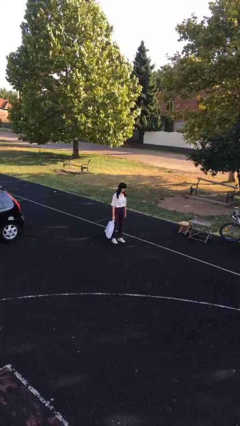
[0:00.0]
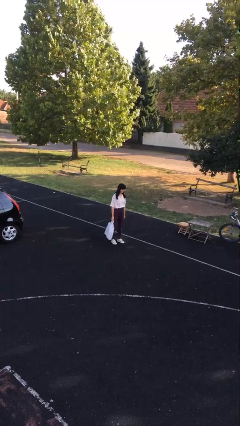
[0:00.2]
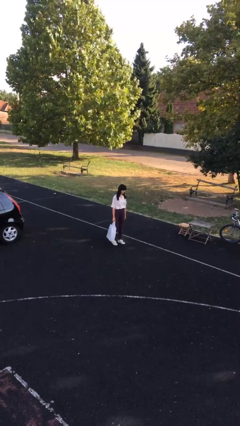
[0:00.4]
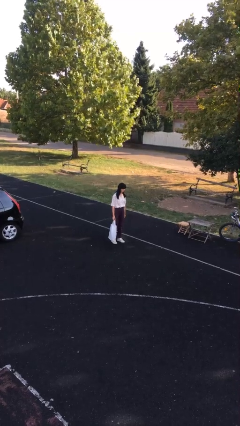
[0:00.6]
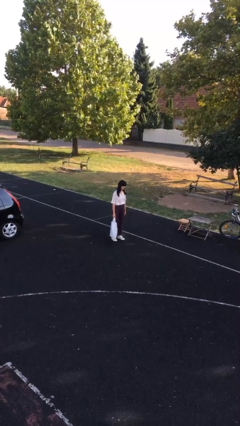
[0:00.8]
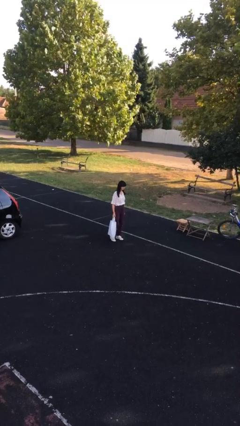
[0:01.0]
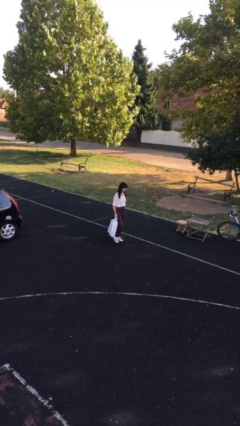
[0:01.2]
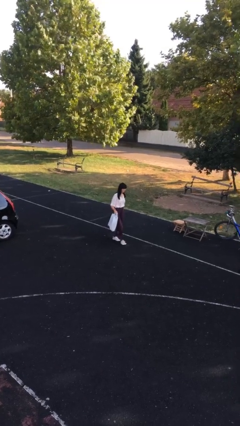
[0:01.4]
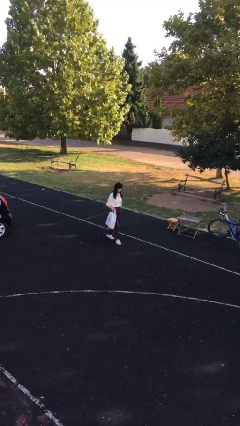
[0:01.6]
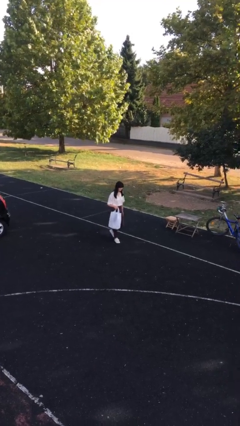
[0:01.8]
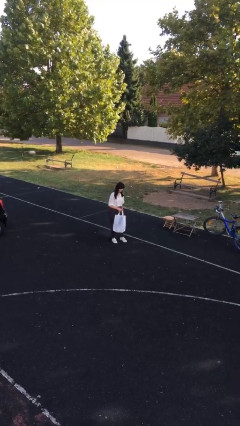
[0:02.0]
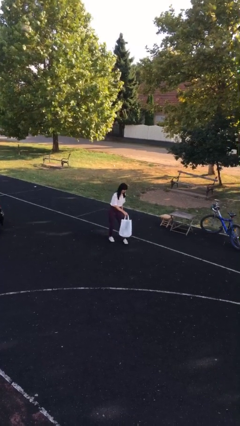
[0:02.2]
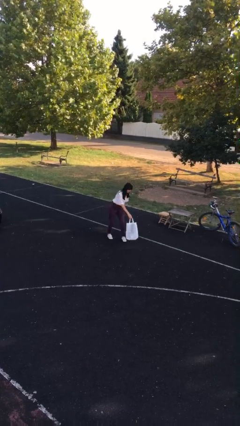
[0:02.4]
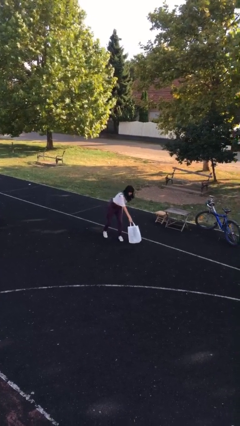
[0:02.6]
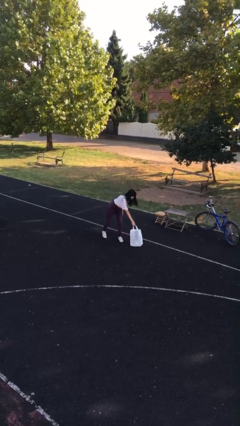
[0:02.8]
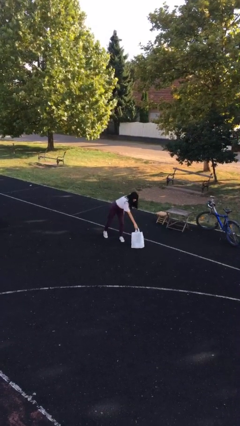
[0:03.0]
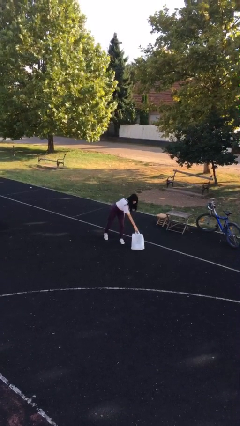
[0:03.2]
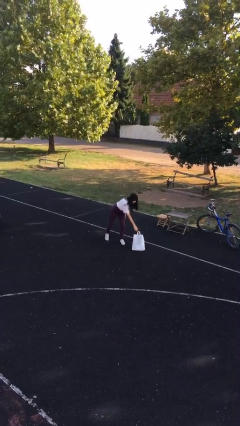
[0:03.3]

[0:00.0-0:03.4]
person puts down object on floor

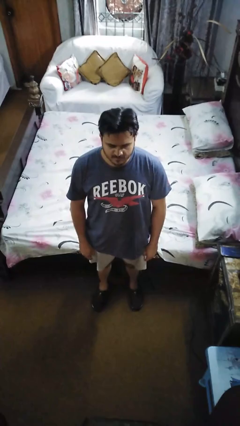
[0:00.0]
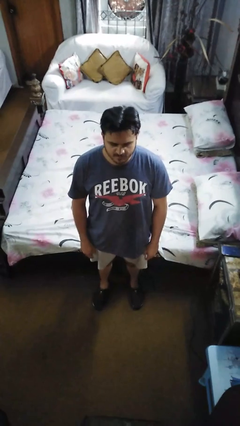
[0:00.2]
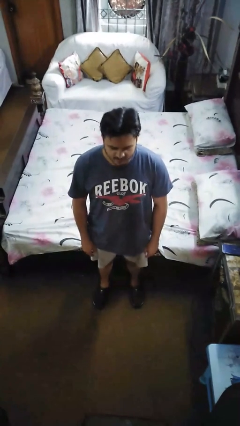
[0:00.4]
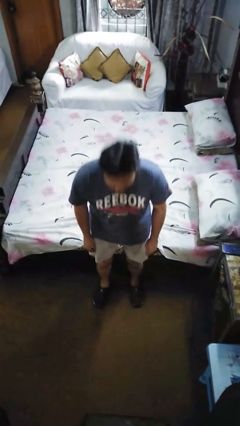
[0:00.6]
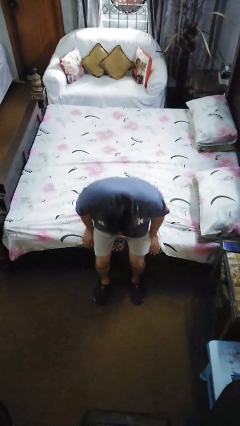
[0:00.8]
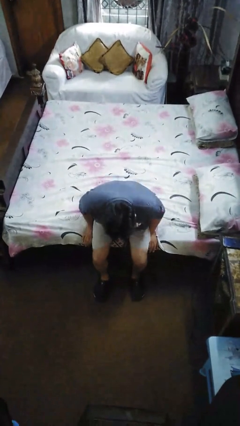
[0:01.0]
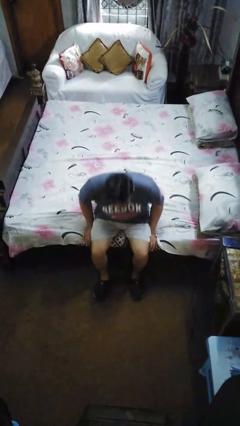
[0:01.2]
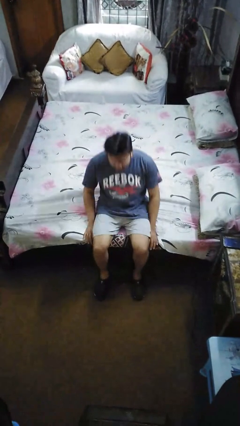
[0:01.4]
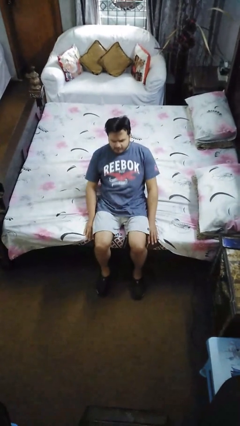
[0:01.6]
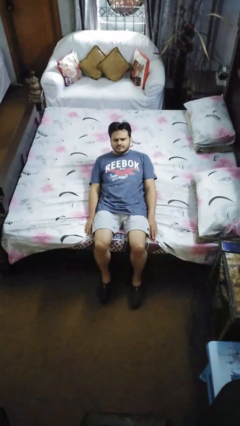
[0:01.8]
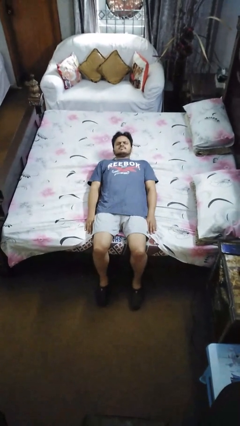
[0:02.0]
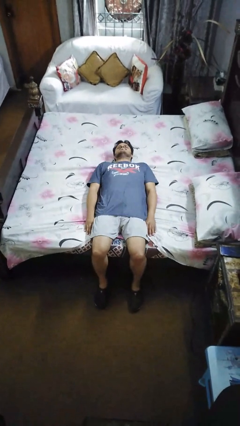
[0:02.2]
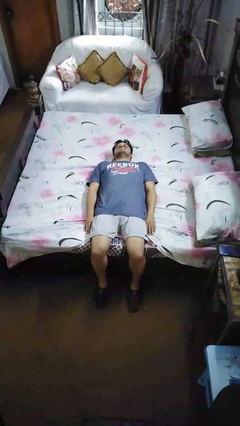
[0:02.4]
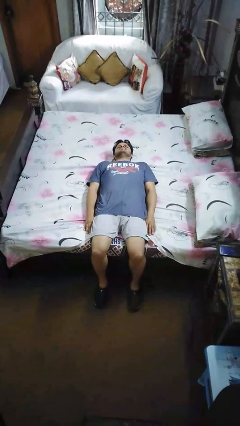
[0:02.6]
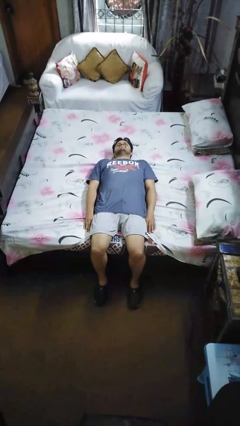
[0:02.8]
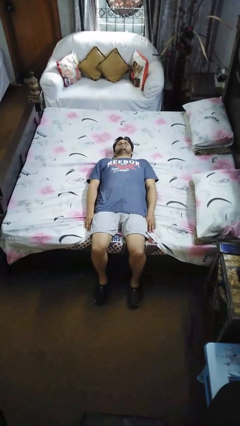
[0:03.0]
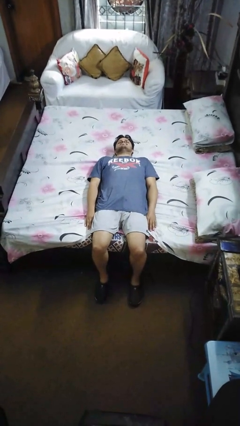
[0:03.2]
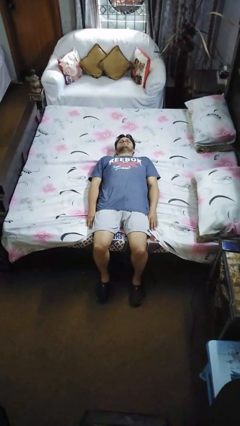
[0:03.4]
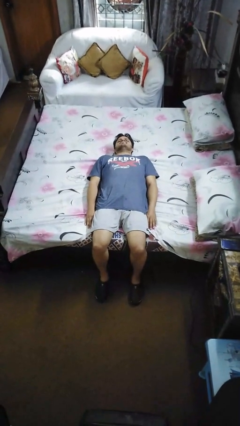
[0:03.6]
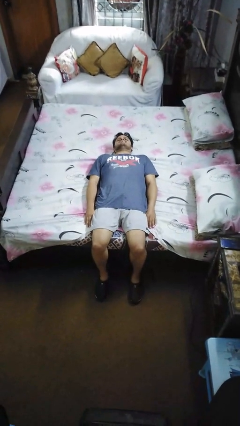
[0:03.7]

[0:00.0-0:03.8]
person lies down on bed

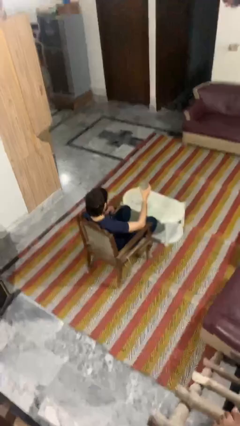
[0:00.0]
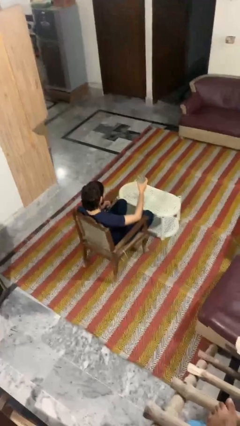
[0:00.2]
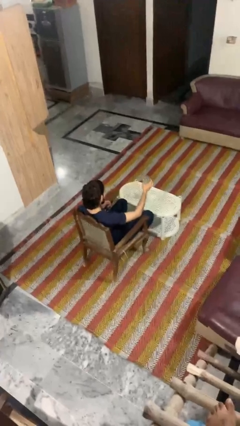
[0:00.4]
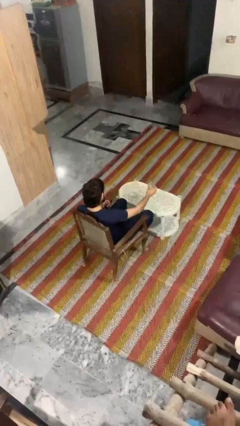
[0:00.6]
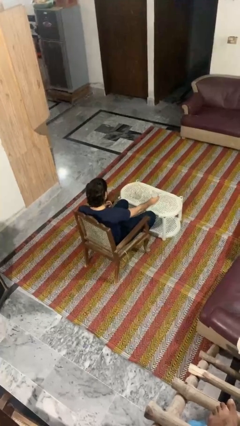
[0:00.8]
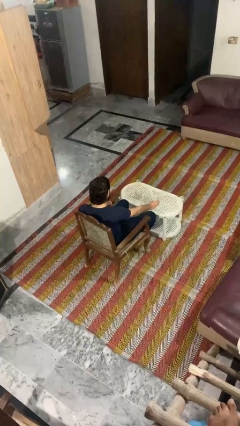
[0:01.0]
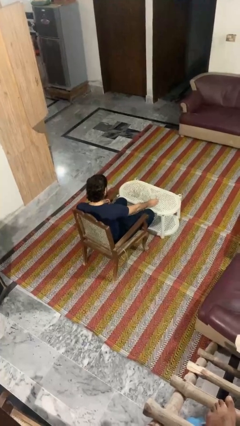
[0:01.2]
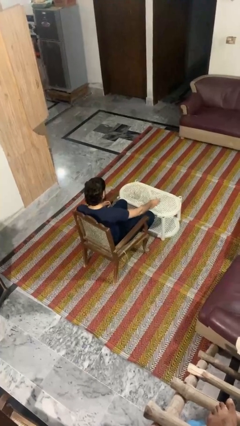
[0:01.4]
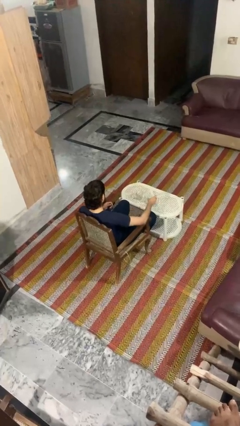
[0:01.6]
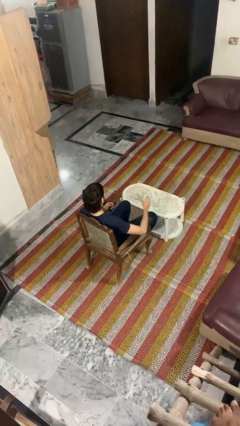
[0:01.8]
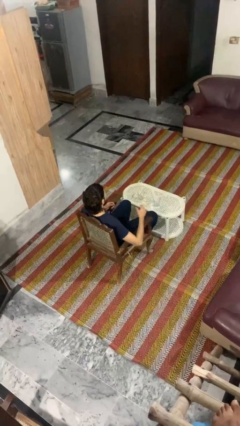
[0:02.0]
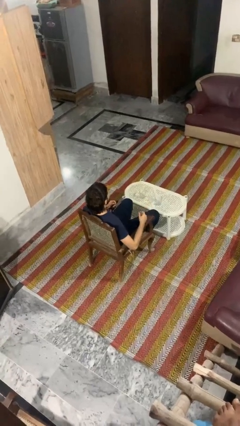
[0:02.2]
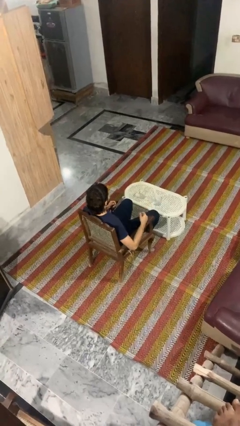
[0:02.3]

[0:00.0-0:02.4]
person puts down object on table

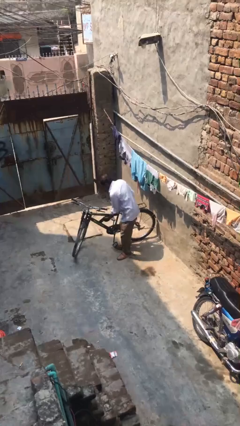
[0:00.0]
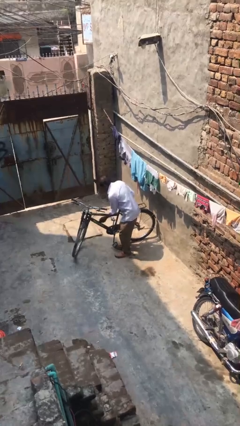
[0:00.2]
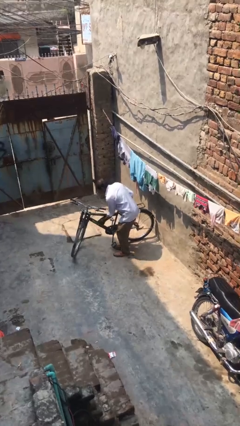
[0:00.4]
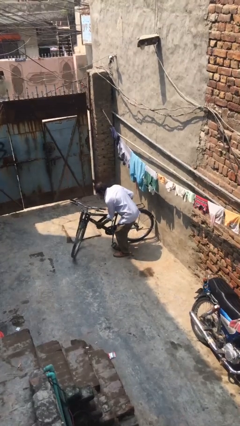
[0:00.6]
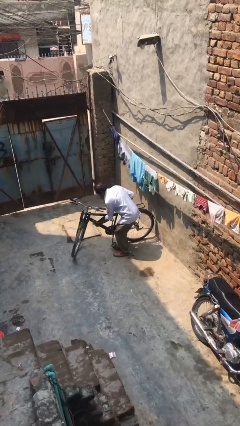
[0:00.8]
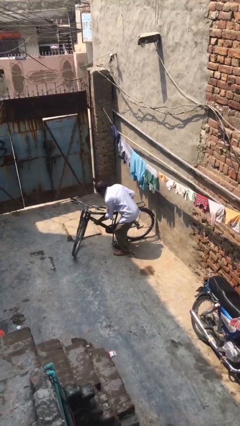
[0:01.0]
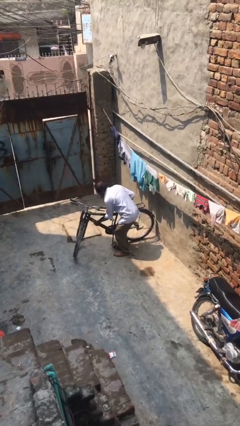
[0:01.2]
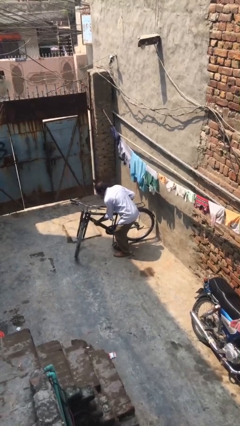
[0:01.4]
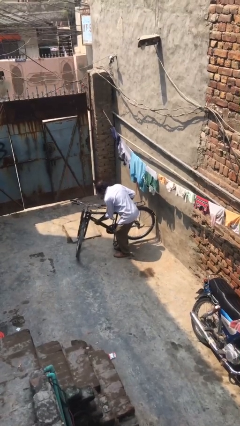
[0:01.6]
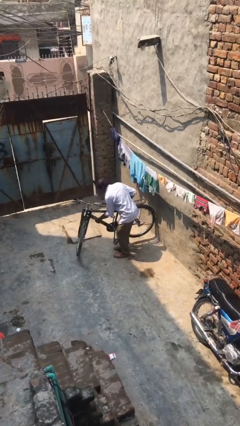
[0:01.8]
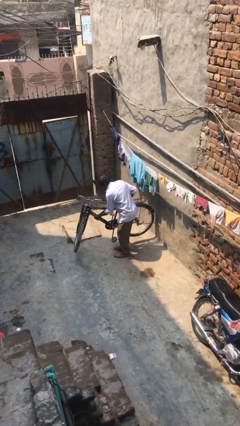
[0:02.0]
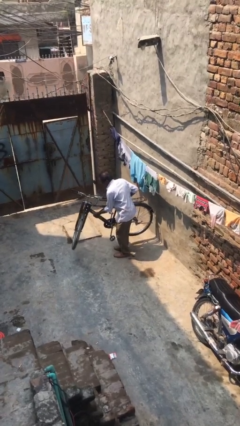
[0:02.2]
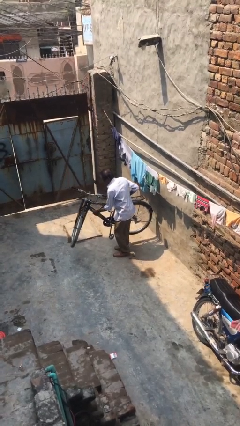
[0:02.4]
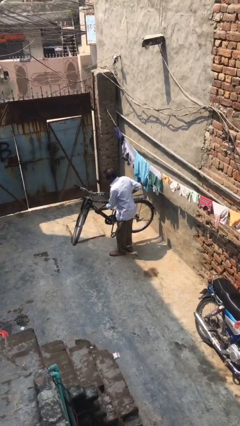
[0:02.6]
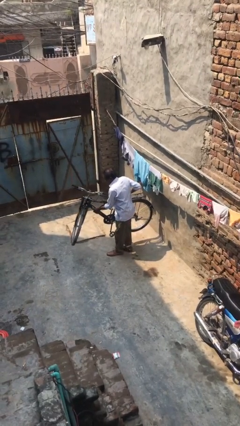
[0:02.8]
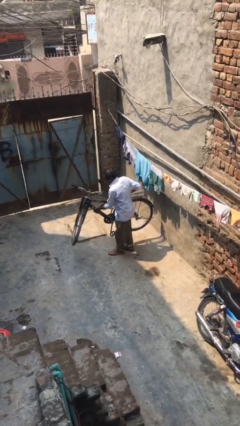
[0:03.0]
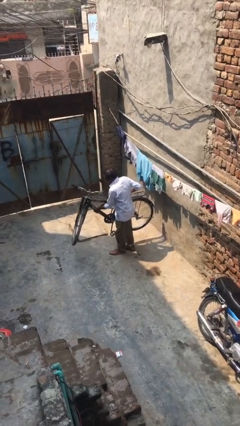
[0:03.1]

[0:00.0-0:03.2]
person picks up object from floor

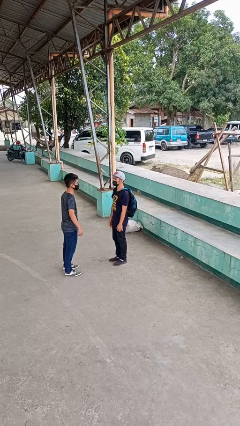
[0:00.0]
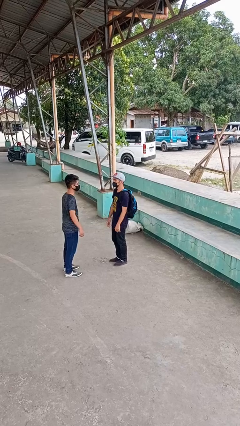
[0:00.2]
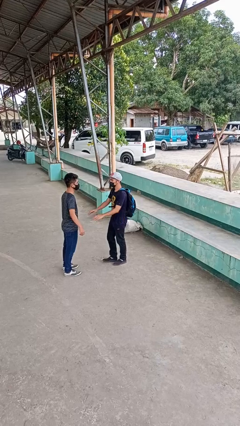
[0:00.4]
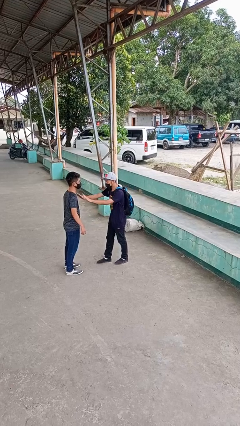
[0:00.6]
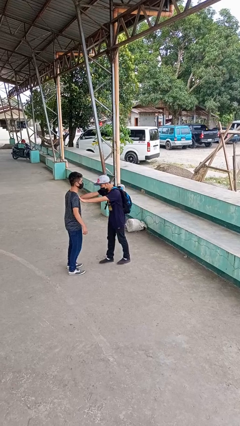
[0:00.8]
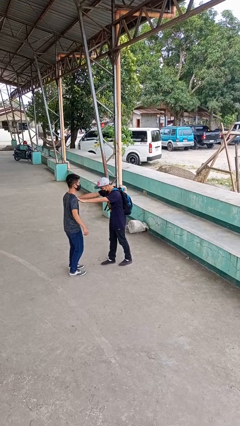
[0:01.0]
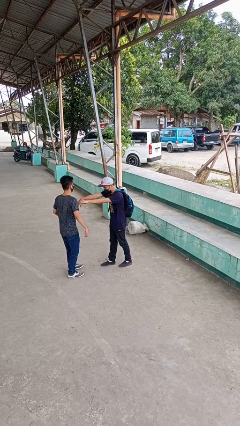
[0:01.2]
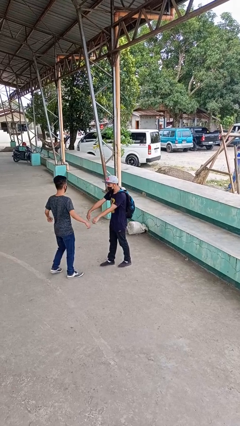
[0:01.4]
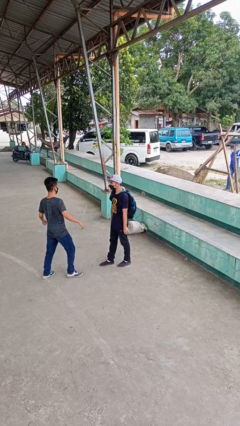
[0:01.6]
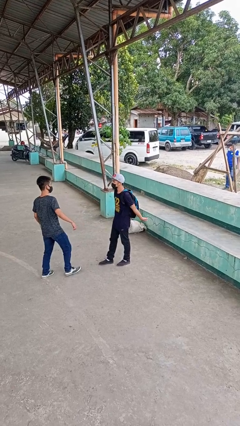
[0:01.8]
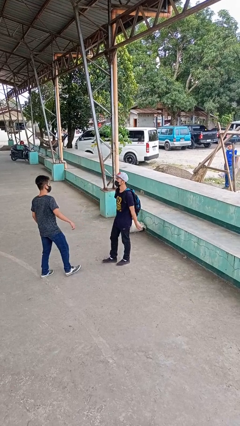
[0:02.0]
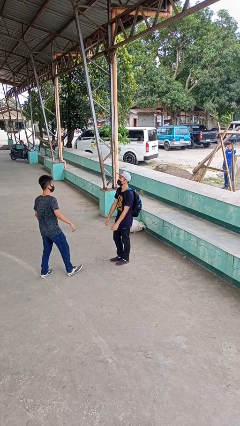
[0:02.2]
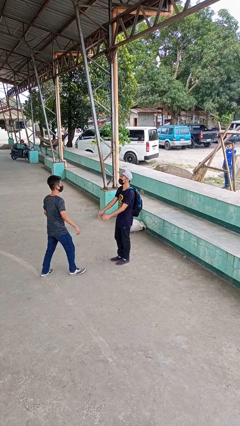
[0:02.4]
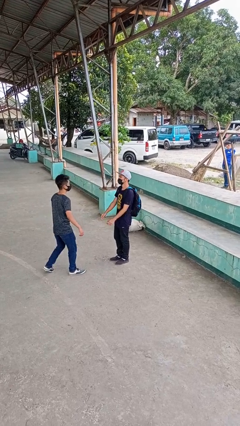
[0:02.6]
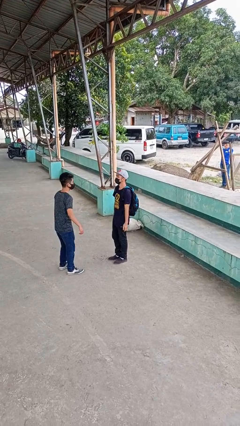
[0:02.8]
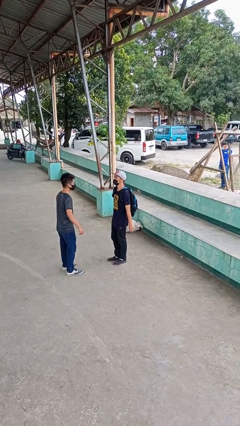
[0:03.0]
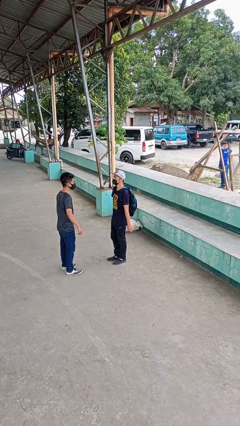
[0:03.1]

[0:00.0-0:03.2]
person shoves person

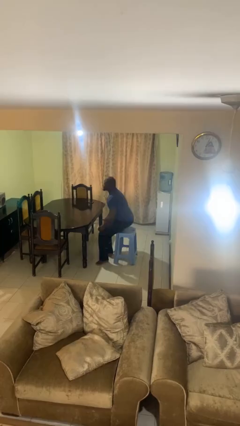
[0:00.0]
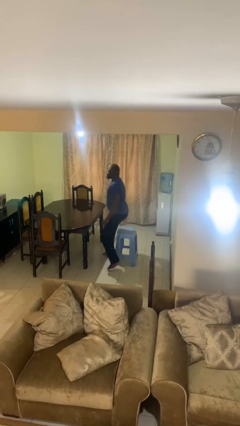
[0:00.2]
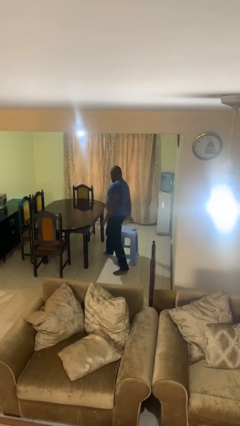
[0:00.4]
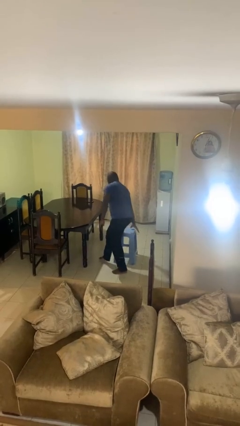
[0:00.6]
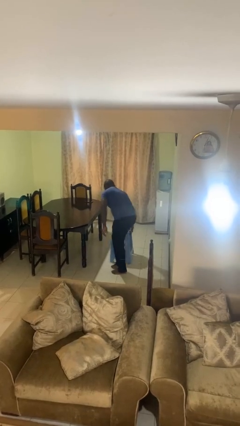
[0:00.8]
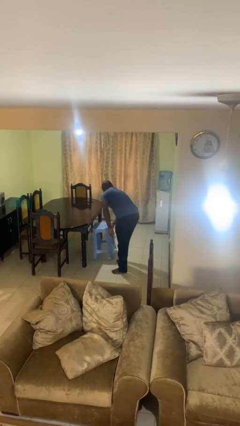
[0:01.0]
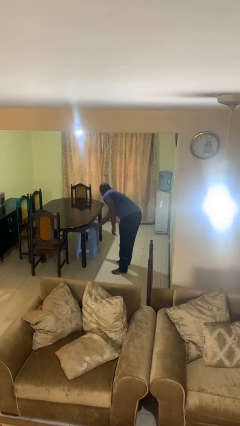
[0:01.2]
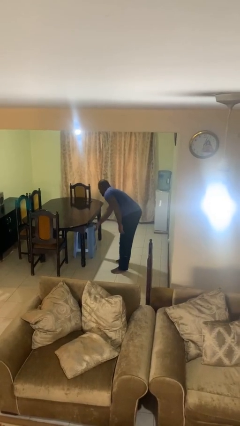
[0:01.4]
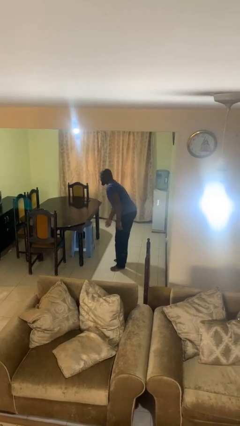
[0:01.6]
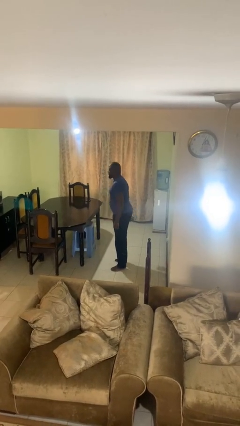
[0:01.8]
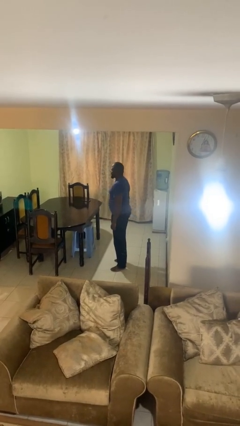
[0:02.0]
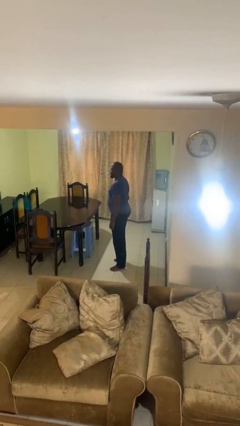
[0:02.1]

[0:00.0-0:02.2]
person stands up
